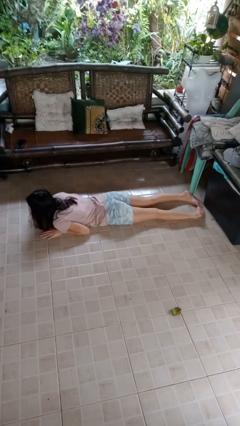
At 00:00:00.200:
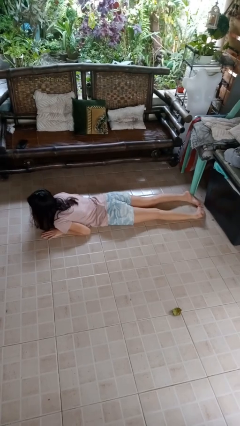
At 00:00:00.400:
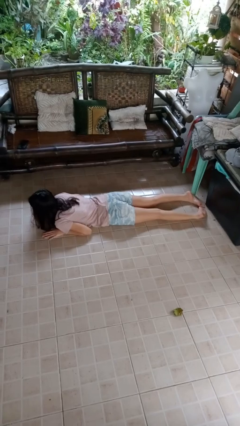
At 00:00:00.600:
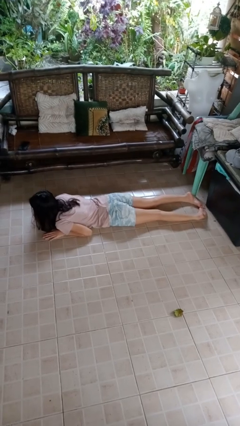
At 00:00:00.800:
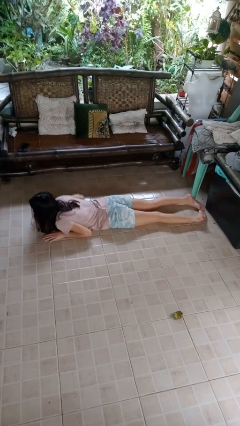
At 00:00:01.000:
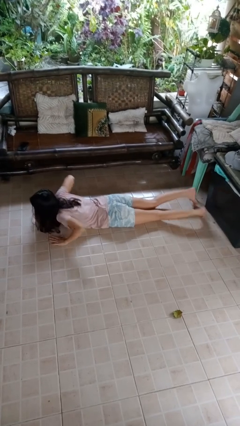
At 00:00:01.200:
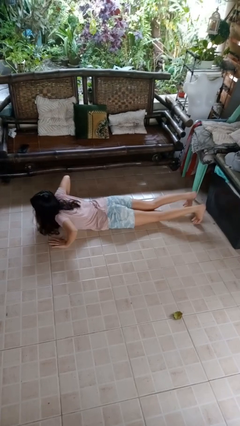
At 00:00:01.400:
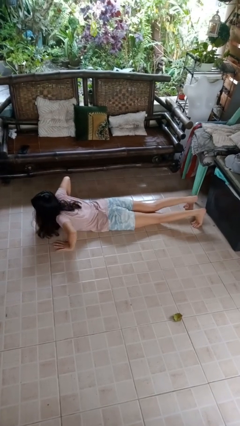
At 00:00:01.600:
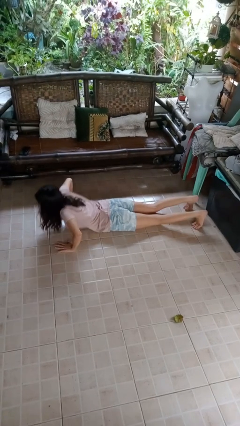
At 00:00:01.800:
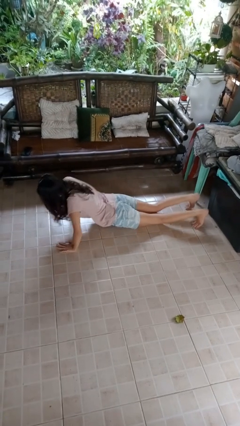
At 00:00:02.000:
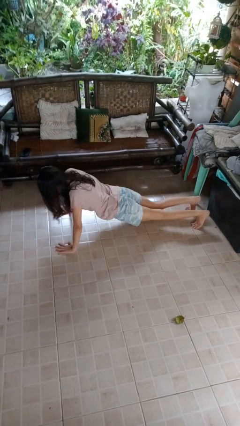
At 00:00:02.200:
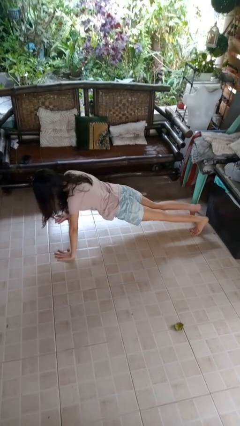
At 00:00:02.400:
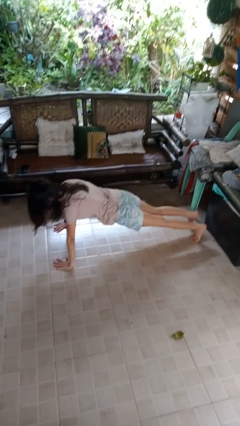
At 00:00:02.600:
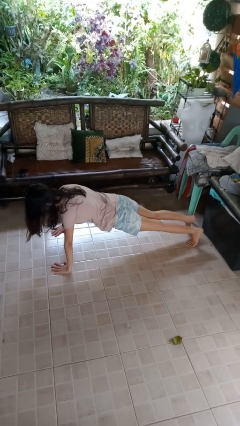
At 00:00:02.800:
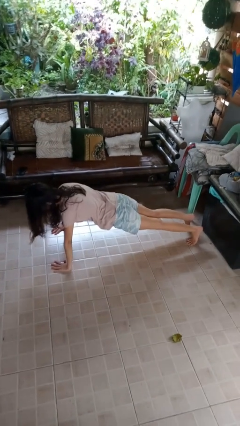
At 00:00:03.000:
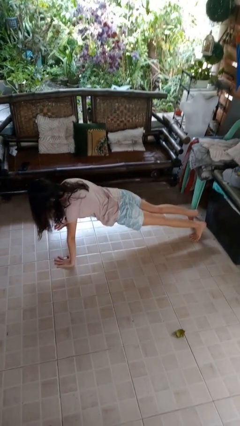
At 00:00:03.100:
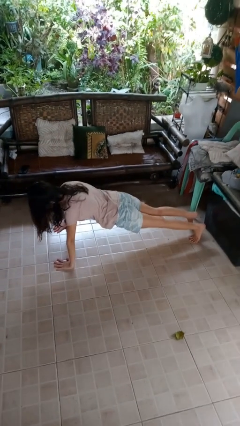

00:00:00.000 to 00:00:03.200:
person exercises with pushup

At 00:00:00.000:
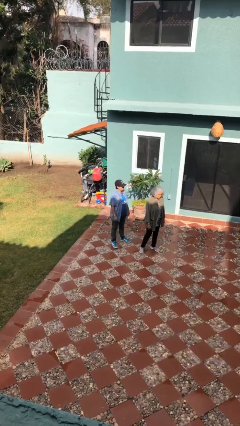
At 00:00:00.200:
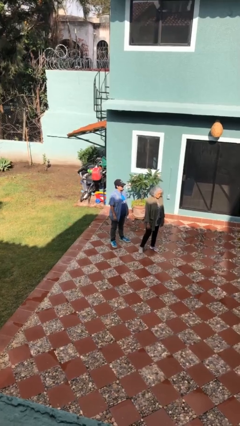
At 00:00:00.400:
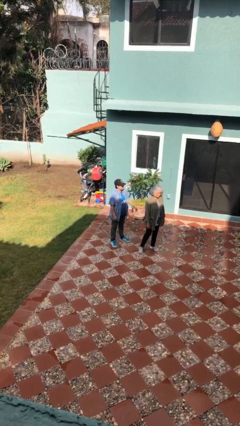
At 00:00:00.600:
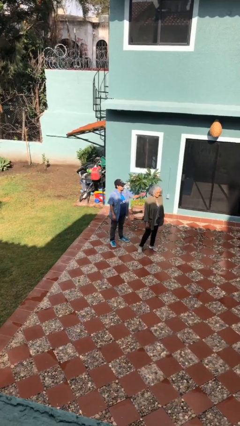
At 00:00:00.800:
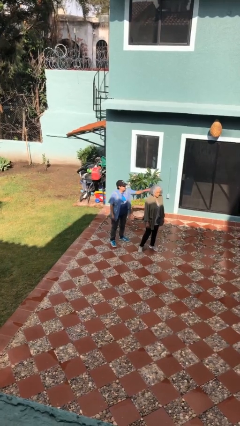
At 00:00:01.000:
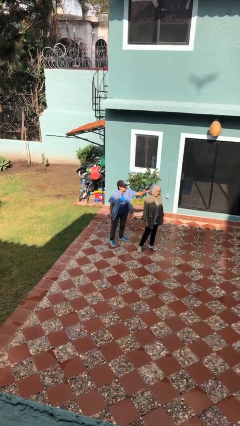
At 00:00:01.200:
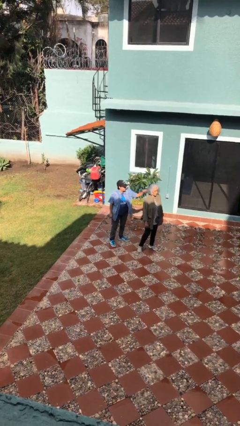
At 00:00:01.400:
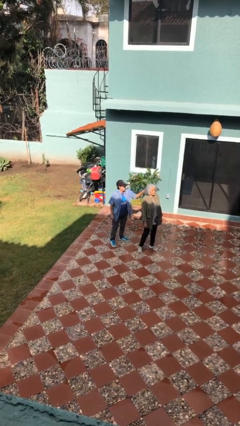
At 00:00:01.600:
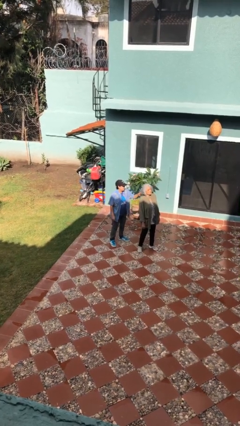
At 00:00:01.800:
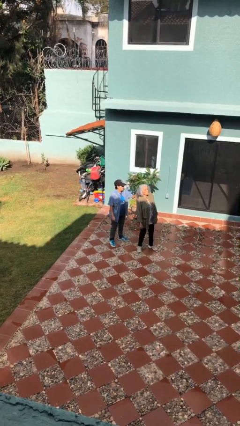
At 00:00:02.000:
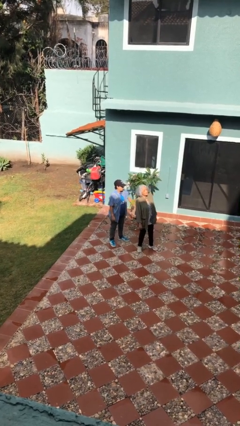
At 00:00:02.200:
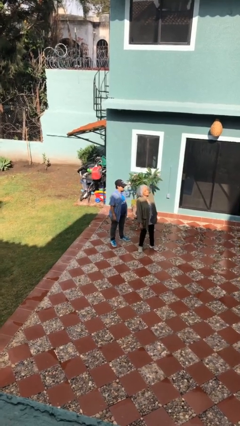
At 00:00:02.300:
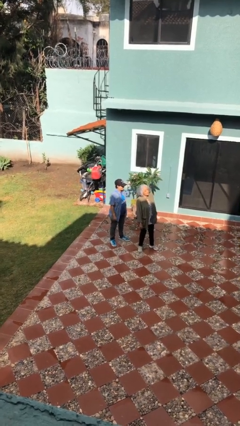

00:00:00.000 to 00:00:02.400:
person grabs person by hair

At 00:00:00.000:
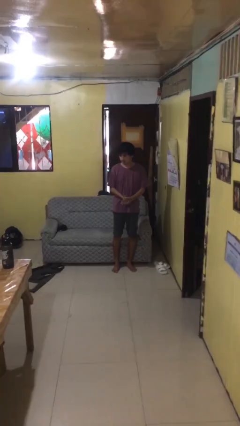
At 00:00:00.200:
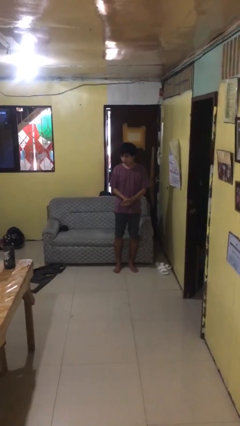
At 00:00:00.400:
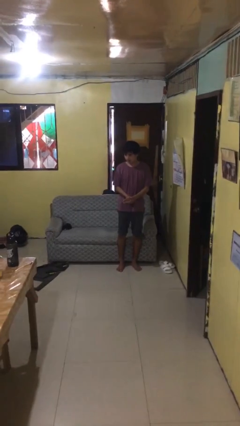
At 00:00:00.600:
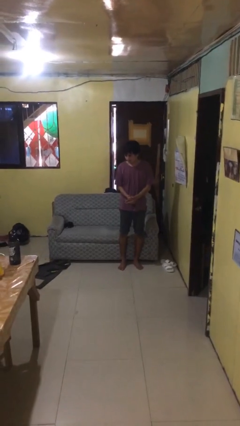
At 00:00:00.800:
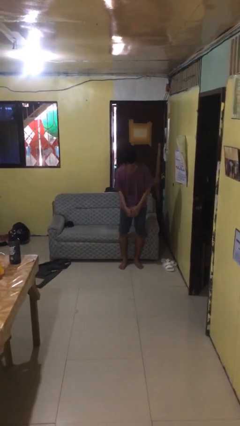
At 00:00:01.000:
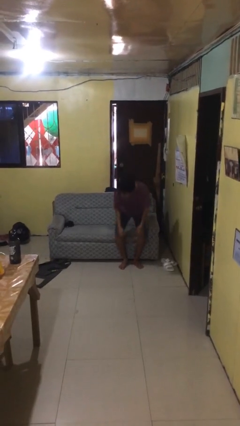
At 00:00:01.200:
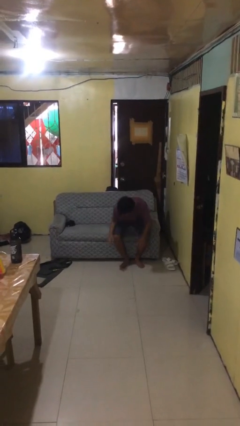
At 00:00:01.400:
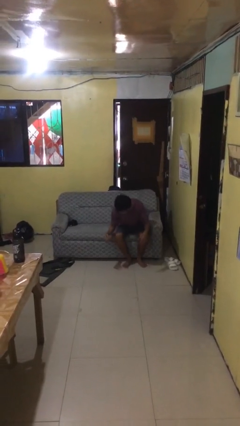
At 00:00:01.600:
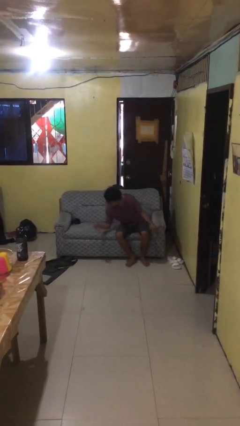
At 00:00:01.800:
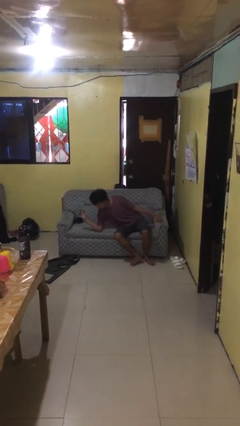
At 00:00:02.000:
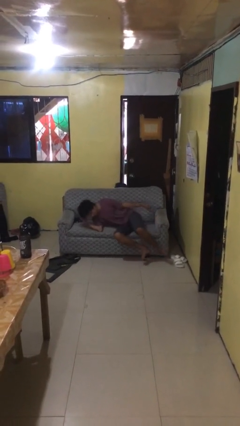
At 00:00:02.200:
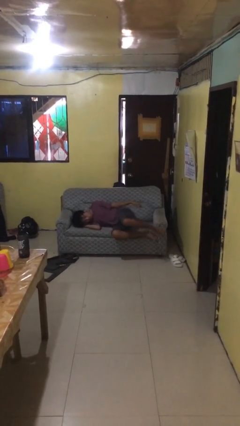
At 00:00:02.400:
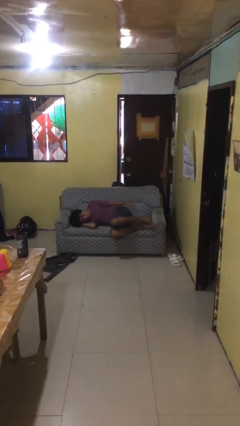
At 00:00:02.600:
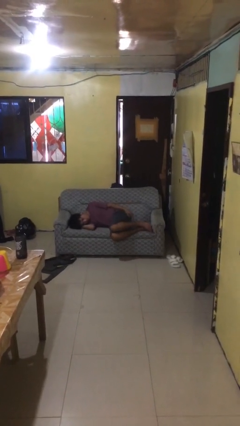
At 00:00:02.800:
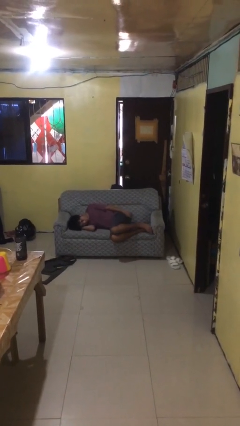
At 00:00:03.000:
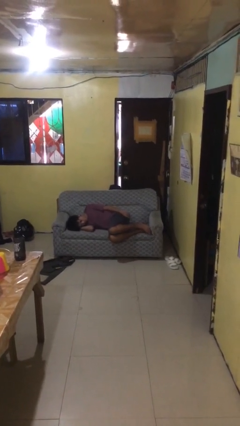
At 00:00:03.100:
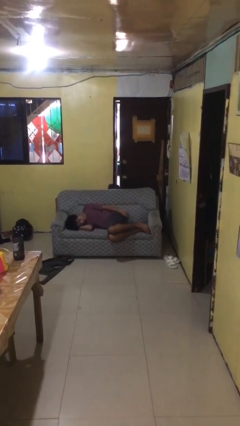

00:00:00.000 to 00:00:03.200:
person lies down on couch

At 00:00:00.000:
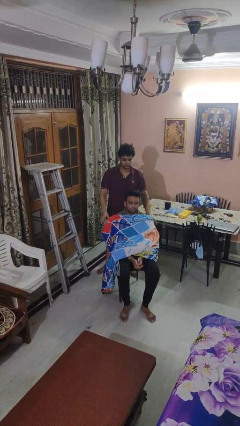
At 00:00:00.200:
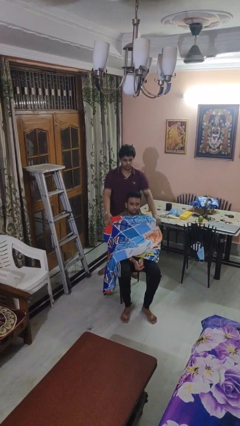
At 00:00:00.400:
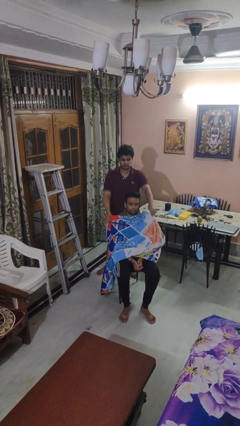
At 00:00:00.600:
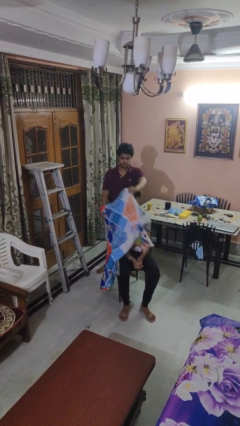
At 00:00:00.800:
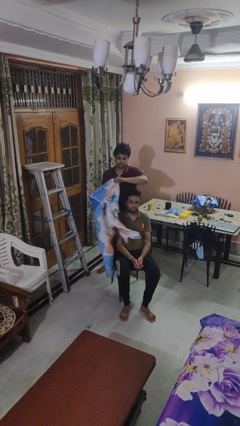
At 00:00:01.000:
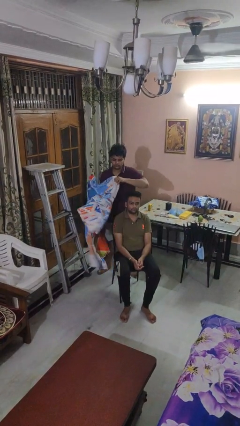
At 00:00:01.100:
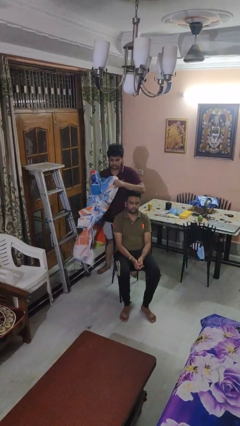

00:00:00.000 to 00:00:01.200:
person uncovers friend with blanket

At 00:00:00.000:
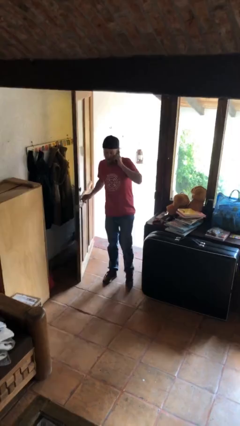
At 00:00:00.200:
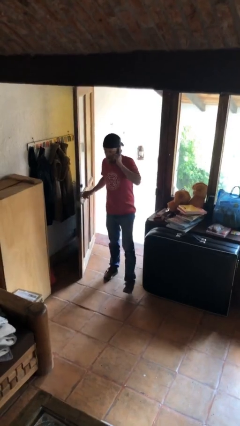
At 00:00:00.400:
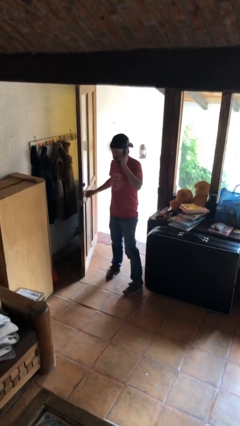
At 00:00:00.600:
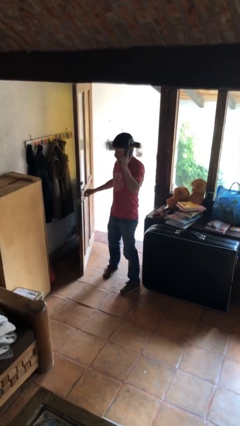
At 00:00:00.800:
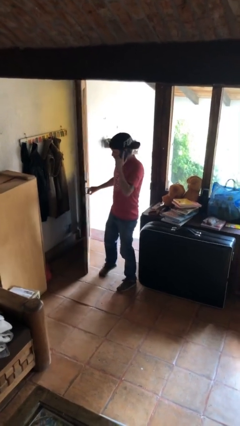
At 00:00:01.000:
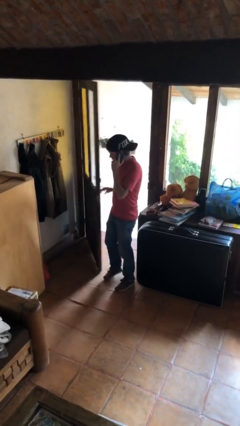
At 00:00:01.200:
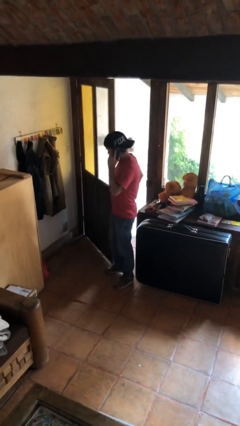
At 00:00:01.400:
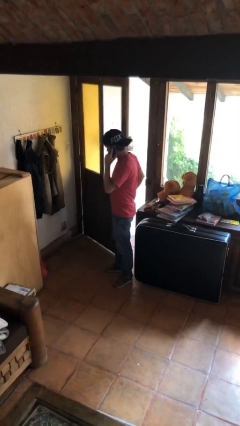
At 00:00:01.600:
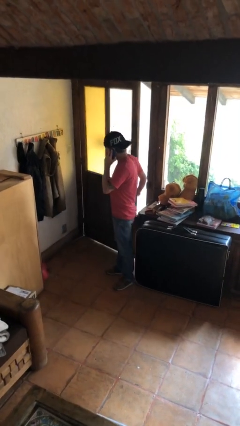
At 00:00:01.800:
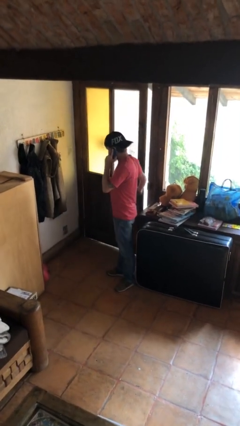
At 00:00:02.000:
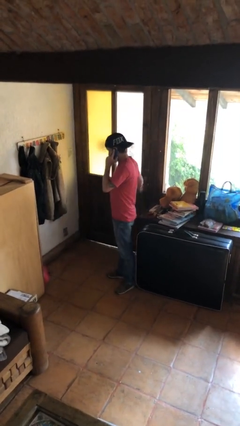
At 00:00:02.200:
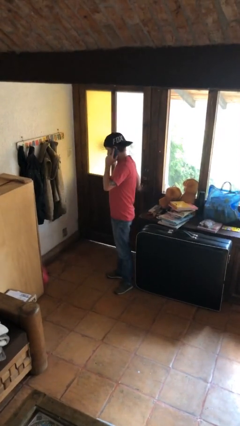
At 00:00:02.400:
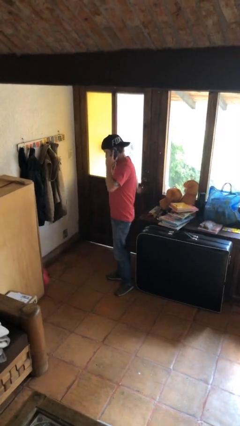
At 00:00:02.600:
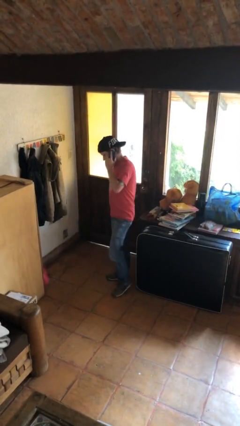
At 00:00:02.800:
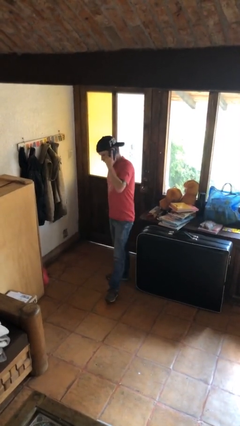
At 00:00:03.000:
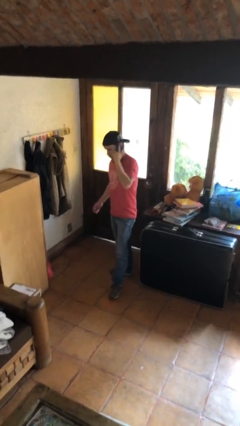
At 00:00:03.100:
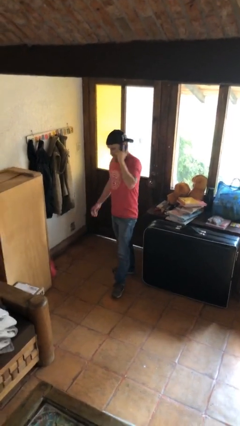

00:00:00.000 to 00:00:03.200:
person closes facility door

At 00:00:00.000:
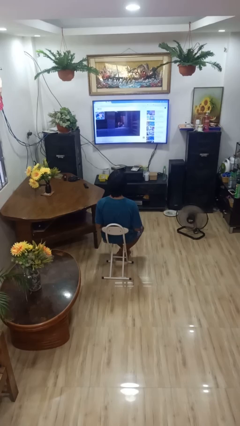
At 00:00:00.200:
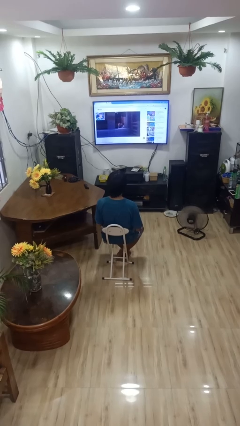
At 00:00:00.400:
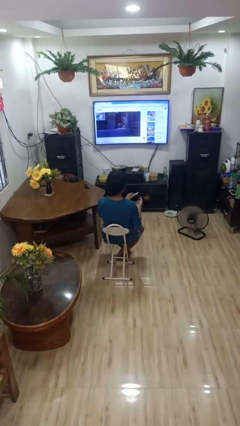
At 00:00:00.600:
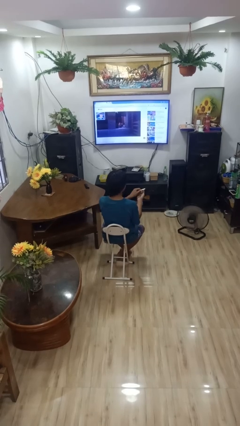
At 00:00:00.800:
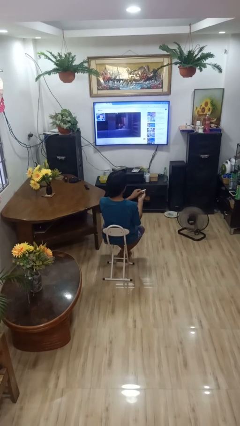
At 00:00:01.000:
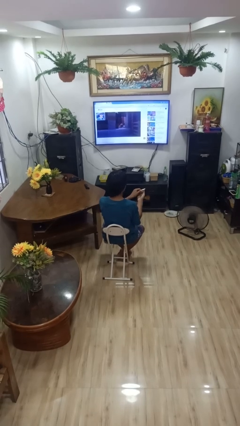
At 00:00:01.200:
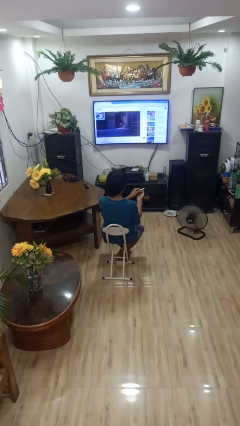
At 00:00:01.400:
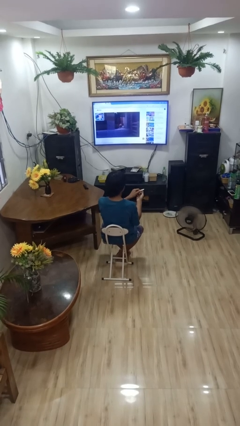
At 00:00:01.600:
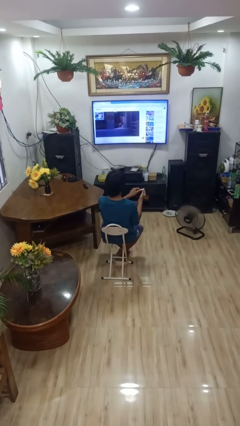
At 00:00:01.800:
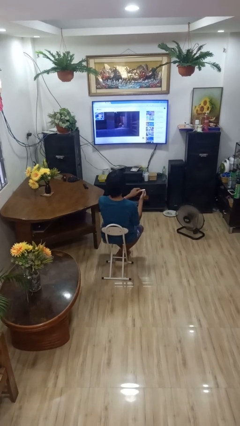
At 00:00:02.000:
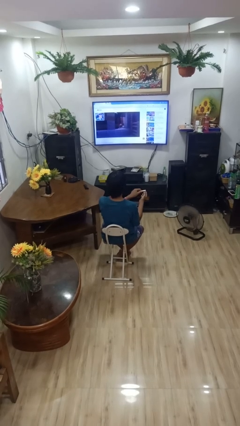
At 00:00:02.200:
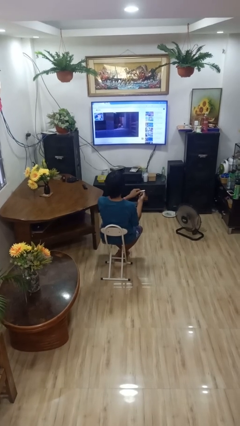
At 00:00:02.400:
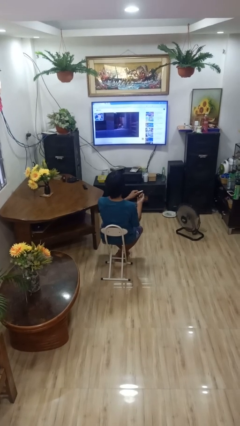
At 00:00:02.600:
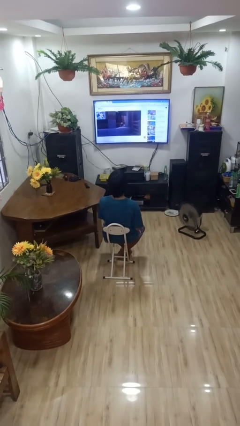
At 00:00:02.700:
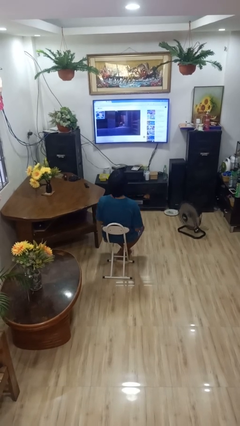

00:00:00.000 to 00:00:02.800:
person files fingernails

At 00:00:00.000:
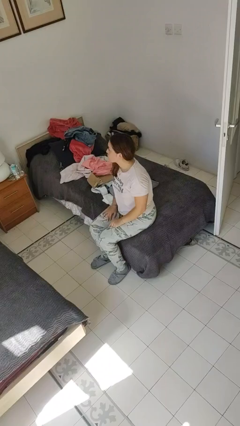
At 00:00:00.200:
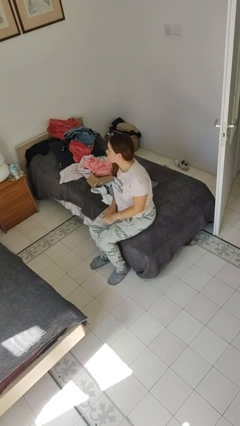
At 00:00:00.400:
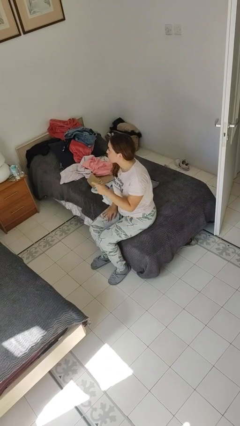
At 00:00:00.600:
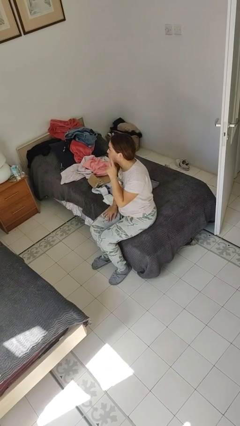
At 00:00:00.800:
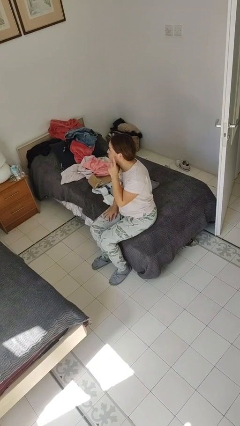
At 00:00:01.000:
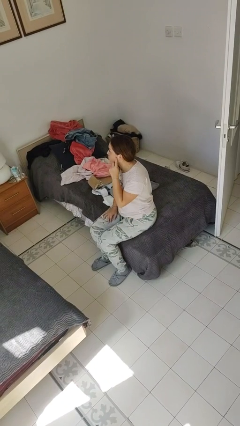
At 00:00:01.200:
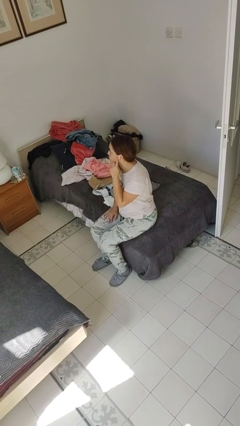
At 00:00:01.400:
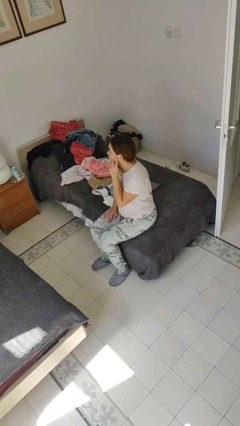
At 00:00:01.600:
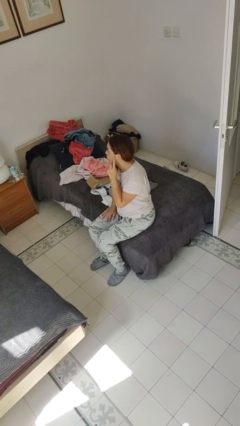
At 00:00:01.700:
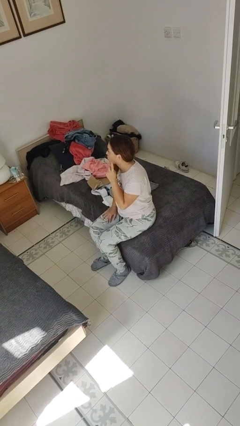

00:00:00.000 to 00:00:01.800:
person gestures listen closely
